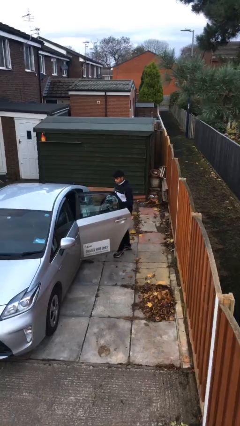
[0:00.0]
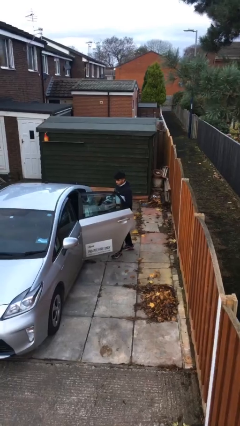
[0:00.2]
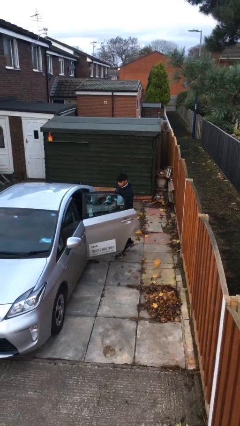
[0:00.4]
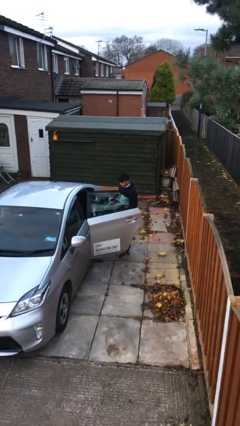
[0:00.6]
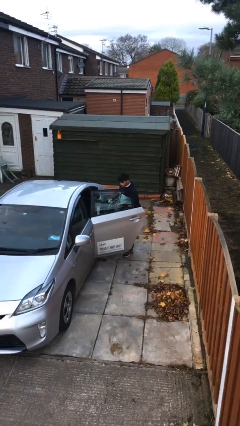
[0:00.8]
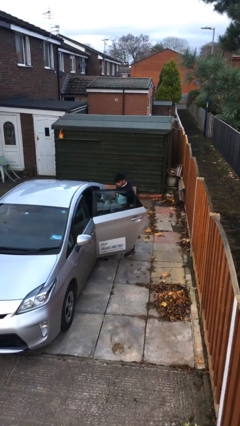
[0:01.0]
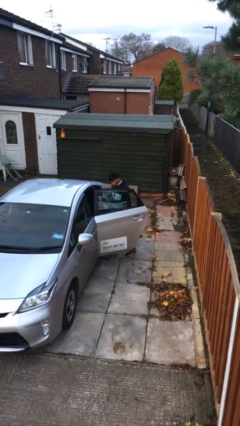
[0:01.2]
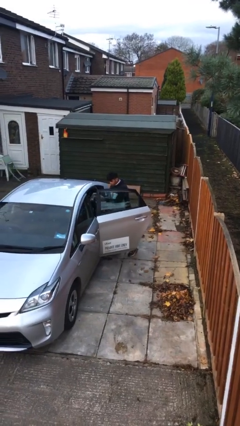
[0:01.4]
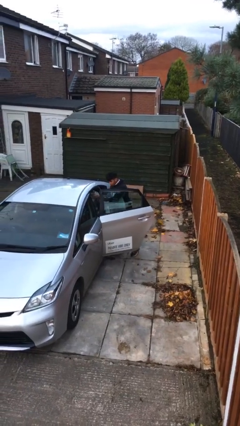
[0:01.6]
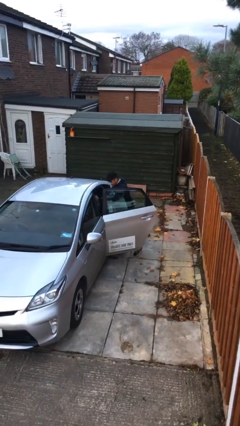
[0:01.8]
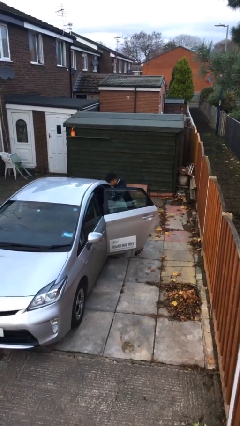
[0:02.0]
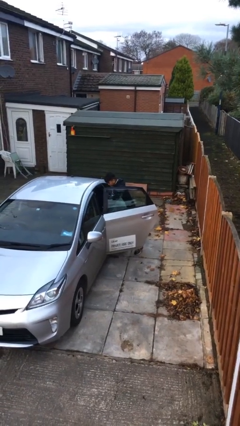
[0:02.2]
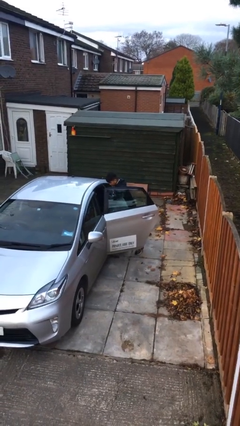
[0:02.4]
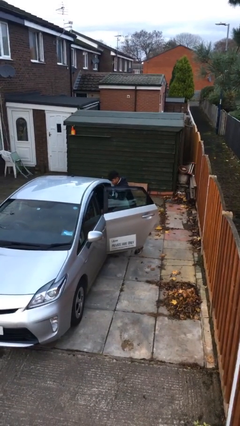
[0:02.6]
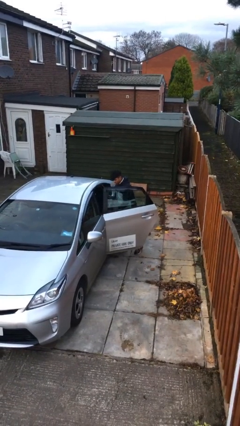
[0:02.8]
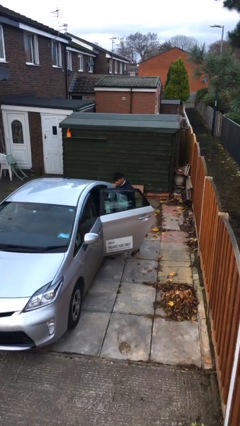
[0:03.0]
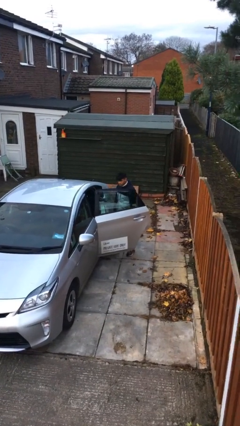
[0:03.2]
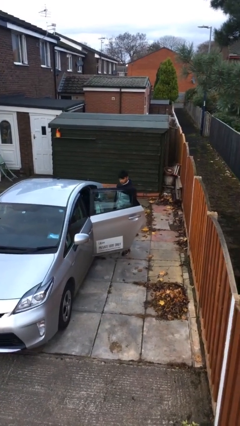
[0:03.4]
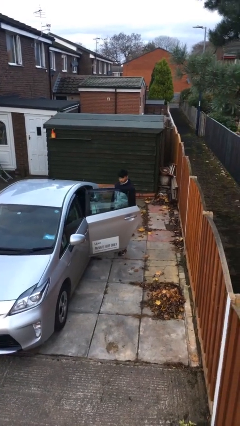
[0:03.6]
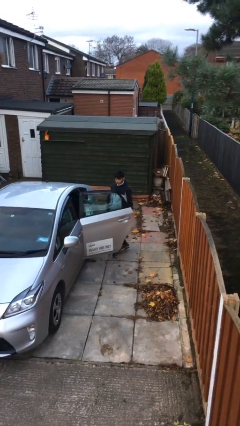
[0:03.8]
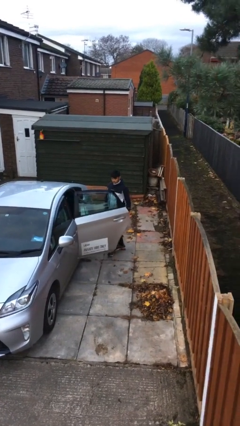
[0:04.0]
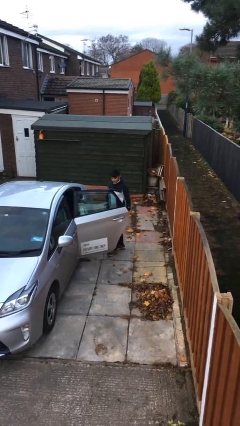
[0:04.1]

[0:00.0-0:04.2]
person loads car

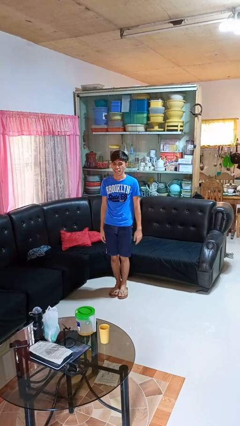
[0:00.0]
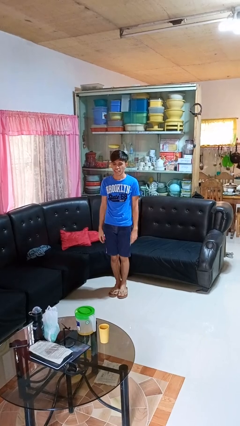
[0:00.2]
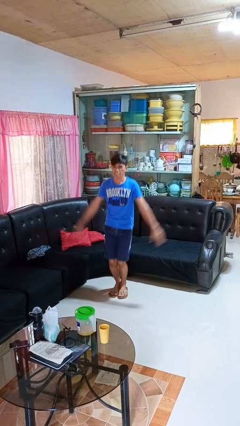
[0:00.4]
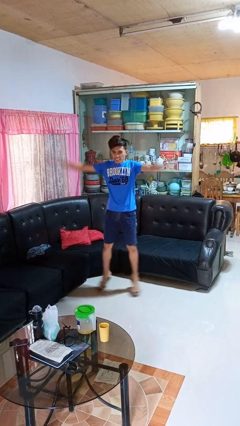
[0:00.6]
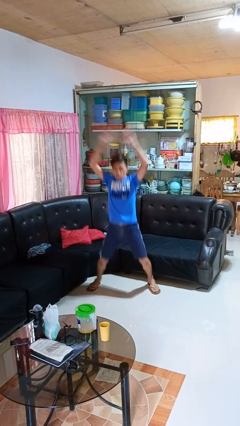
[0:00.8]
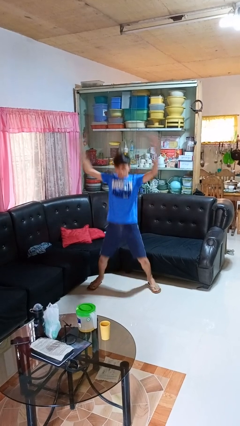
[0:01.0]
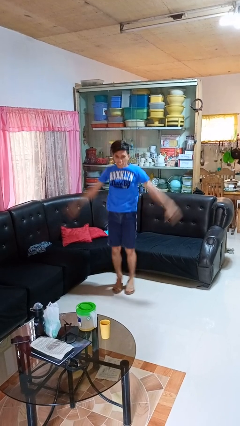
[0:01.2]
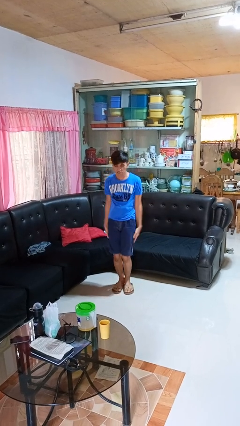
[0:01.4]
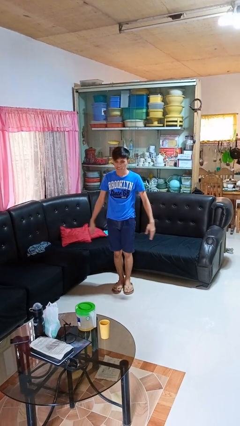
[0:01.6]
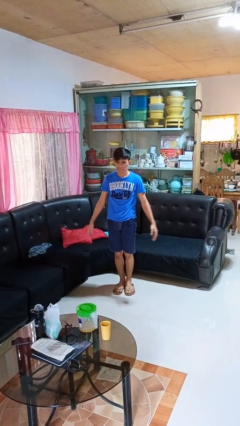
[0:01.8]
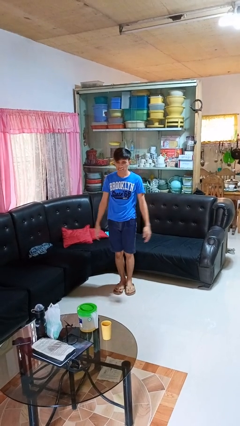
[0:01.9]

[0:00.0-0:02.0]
person exercises with jumping jacks

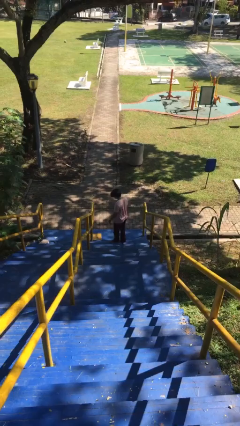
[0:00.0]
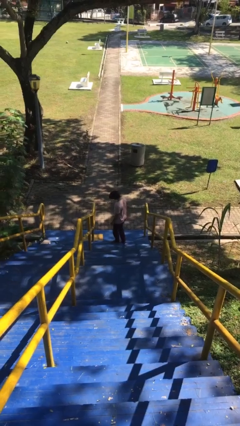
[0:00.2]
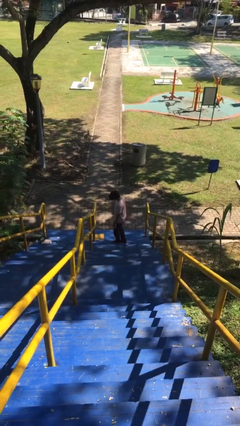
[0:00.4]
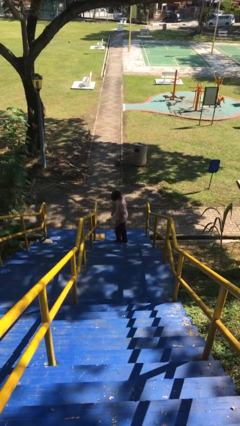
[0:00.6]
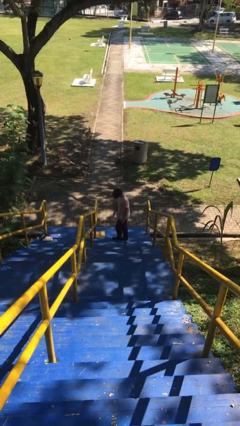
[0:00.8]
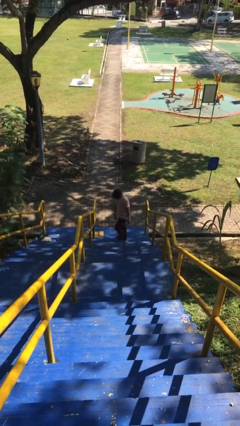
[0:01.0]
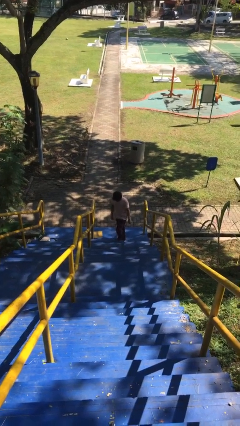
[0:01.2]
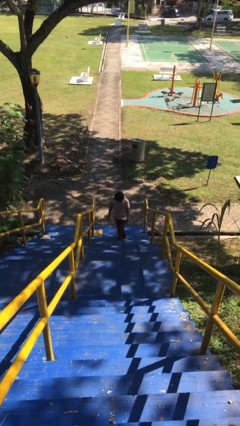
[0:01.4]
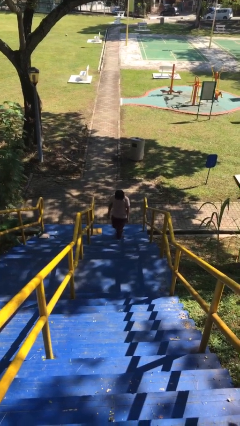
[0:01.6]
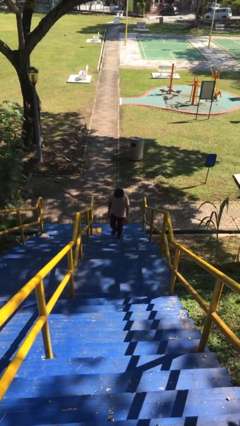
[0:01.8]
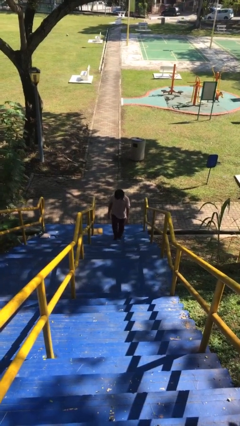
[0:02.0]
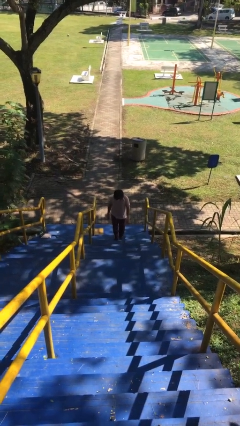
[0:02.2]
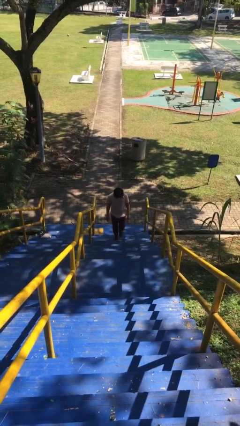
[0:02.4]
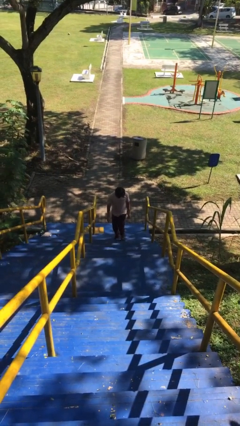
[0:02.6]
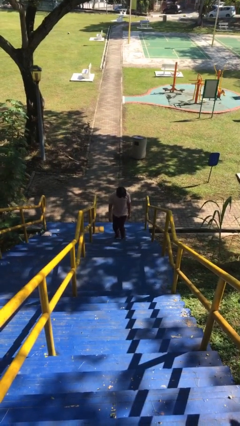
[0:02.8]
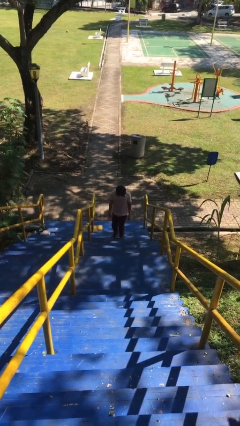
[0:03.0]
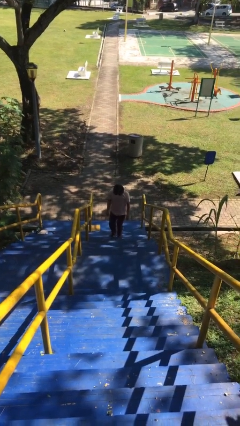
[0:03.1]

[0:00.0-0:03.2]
person climbs up stairs

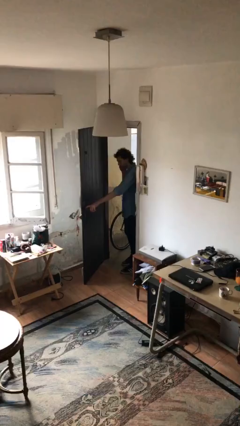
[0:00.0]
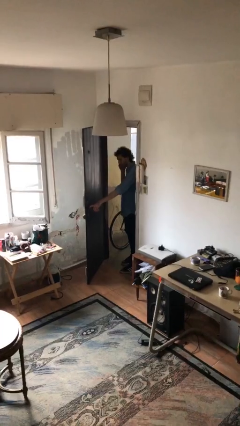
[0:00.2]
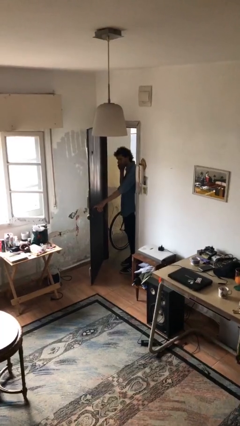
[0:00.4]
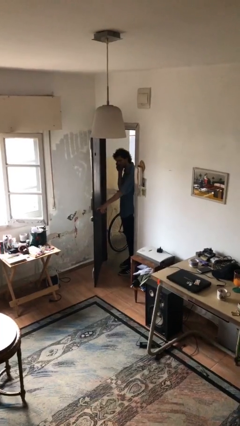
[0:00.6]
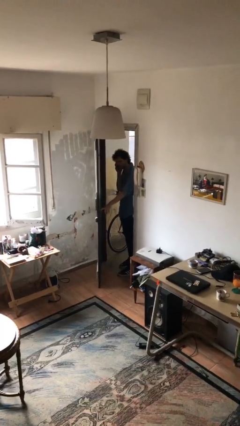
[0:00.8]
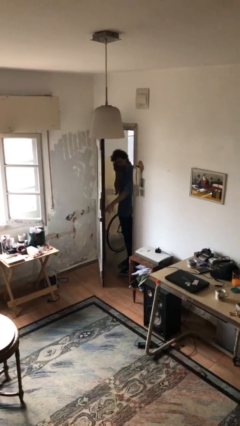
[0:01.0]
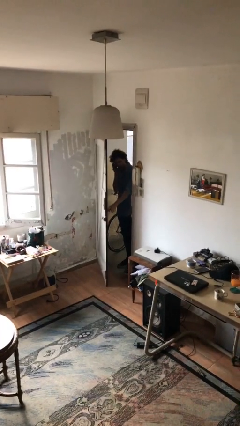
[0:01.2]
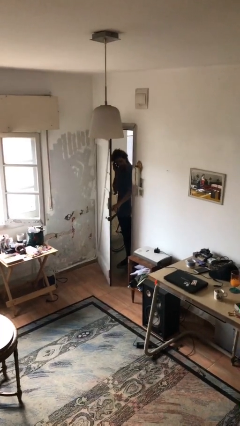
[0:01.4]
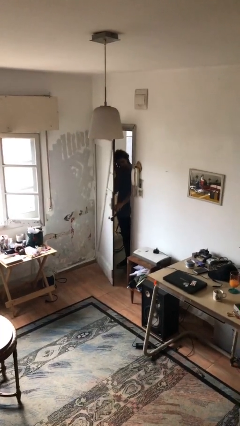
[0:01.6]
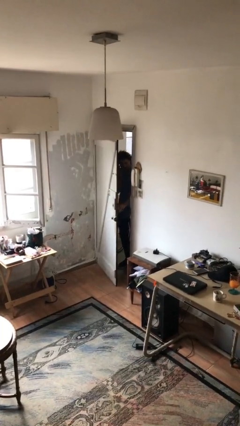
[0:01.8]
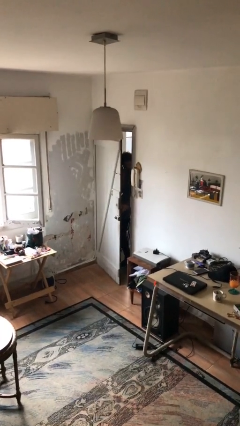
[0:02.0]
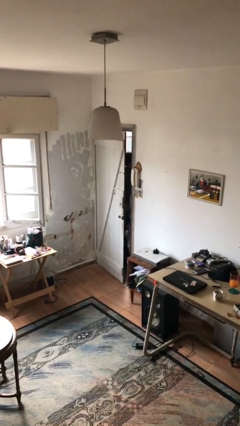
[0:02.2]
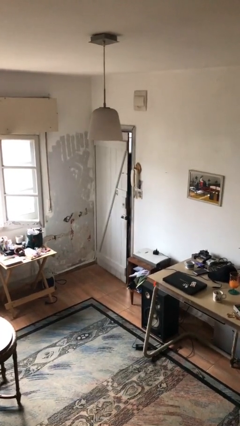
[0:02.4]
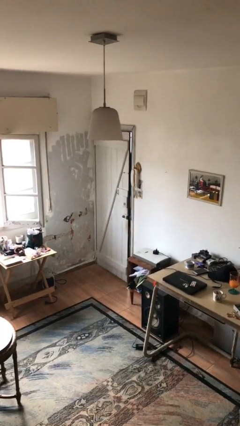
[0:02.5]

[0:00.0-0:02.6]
person closes facility door

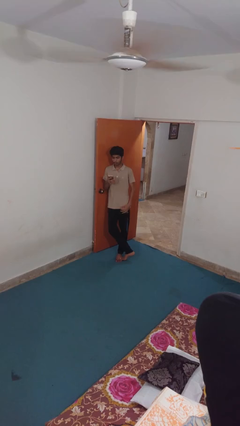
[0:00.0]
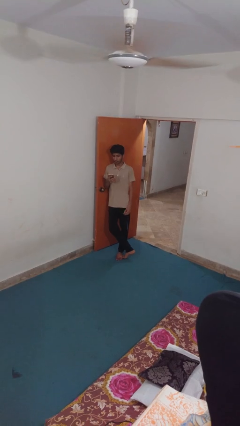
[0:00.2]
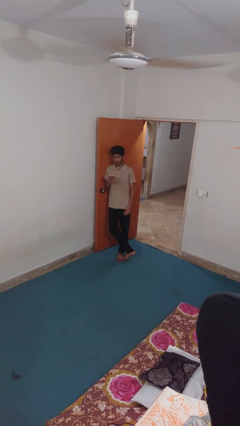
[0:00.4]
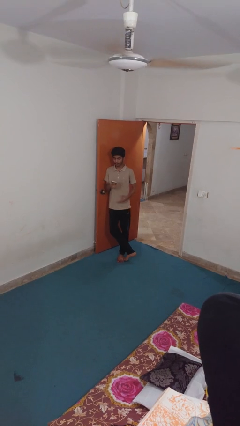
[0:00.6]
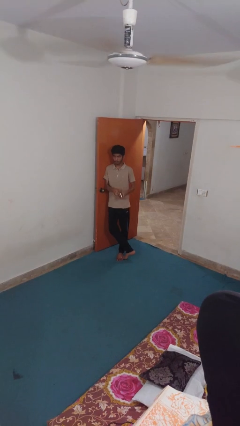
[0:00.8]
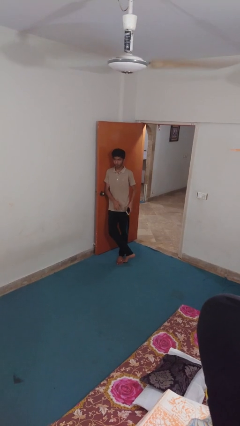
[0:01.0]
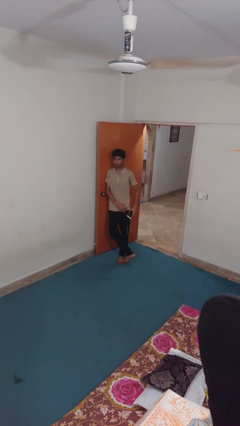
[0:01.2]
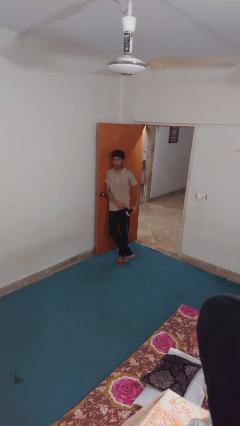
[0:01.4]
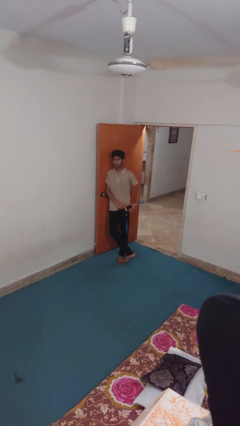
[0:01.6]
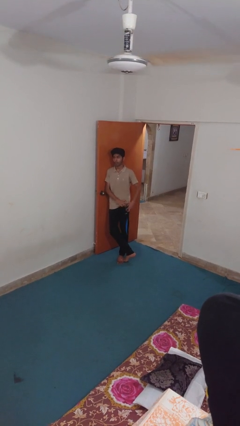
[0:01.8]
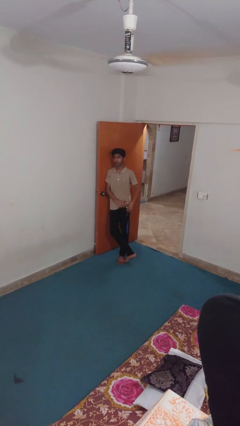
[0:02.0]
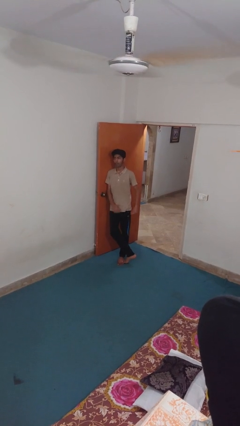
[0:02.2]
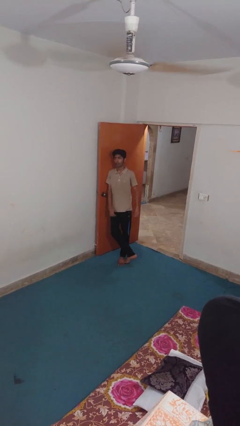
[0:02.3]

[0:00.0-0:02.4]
person puts phone into pocket

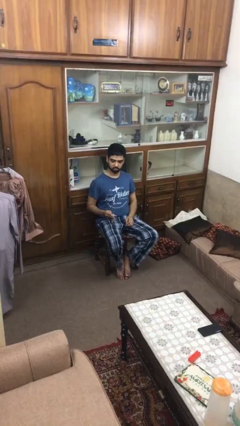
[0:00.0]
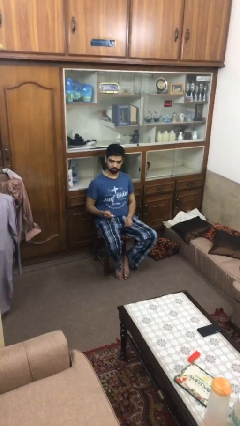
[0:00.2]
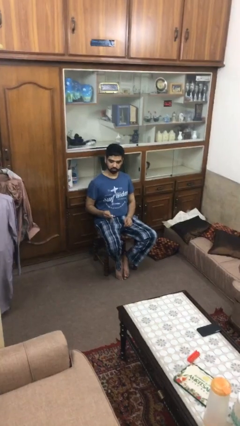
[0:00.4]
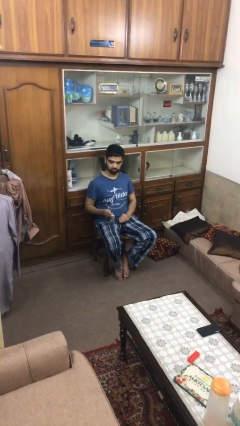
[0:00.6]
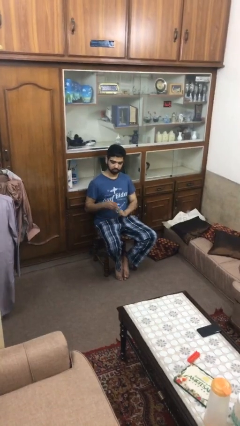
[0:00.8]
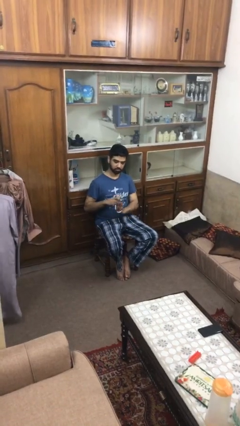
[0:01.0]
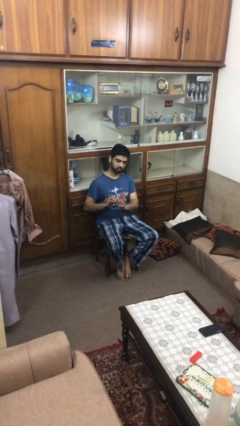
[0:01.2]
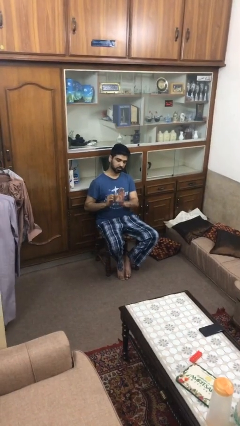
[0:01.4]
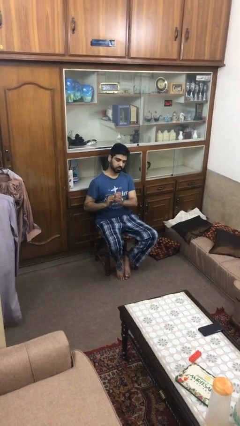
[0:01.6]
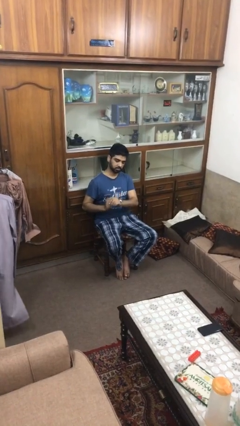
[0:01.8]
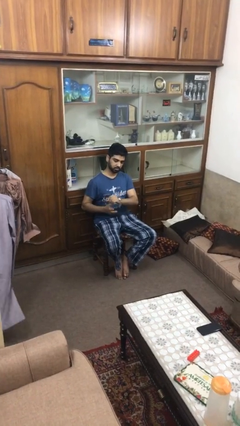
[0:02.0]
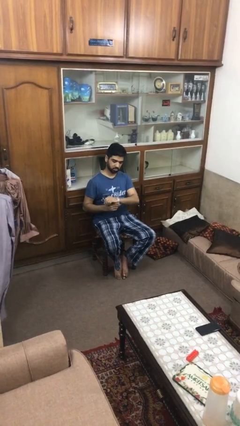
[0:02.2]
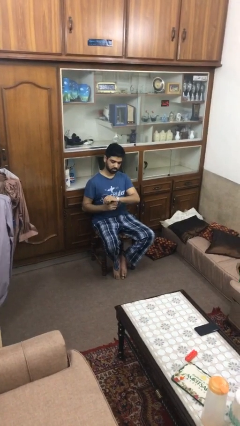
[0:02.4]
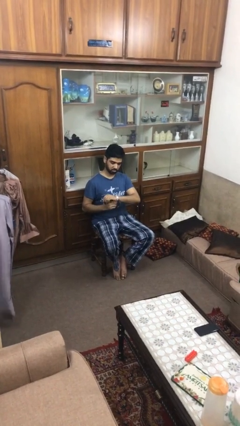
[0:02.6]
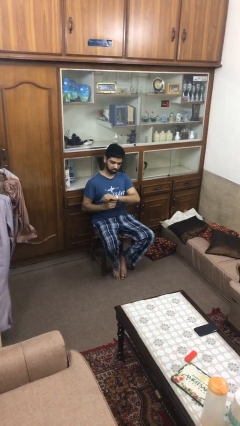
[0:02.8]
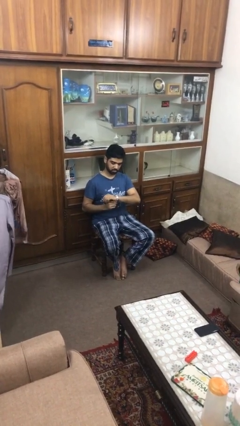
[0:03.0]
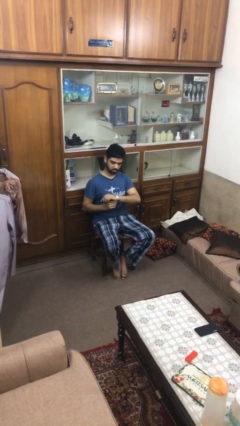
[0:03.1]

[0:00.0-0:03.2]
person puts on wristwatch

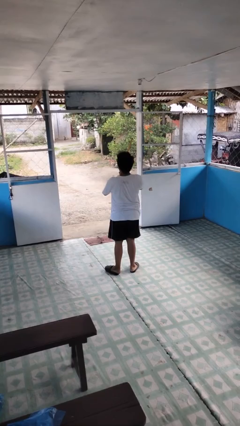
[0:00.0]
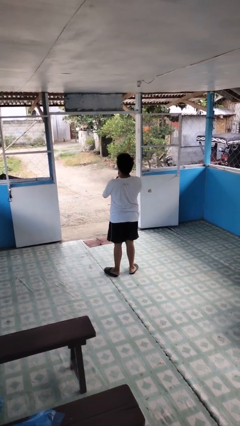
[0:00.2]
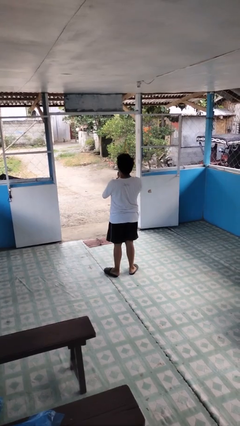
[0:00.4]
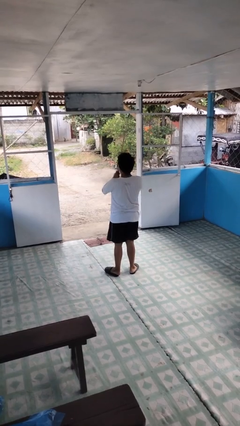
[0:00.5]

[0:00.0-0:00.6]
person throws object into air
